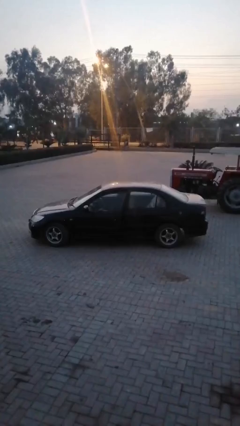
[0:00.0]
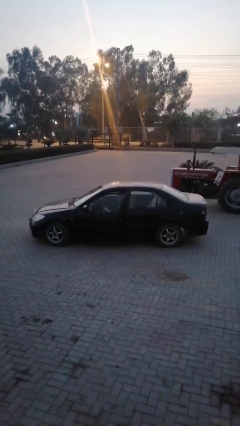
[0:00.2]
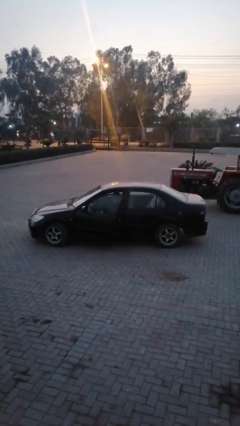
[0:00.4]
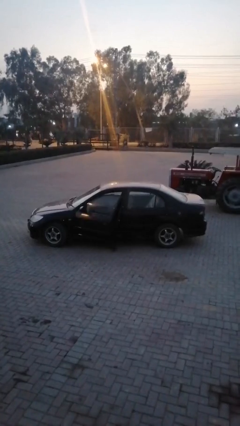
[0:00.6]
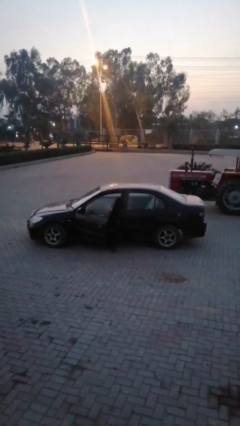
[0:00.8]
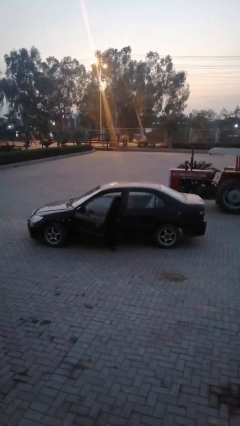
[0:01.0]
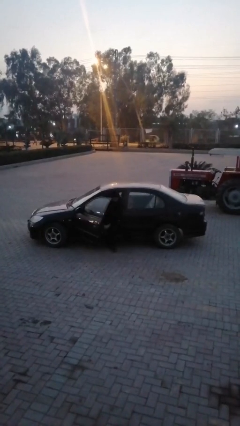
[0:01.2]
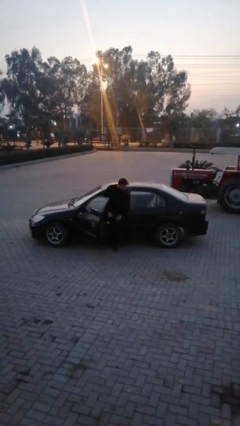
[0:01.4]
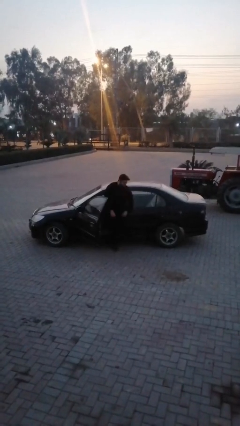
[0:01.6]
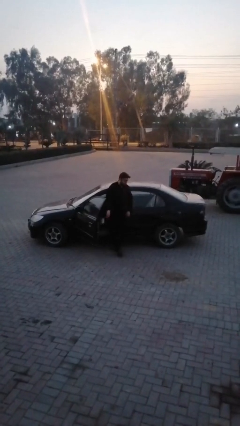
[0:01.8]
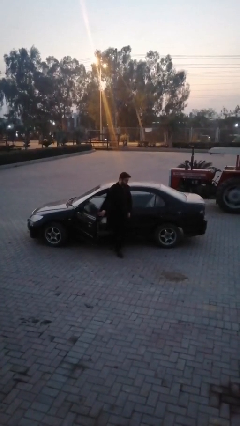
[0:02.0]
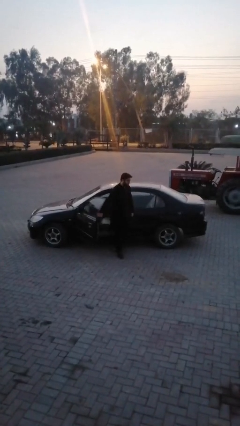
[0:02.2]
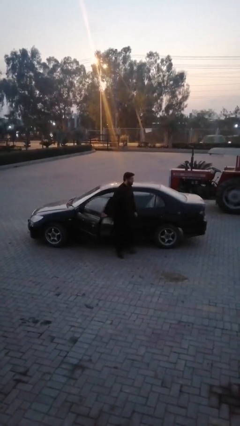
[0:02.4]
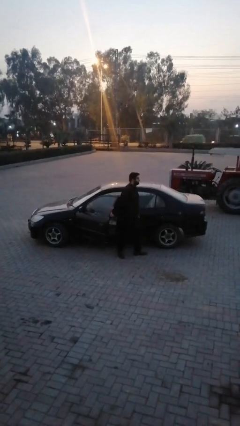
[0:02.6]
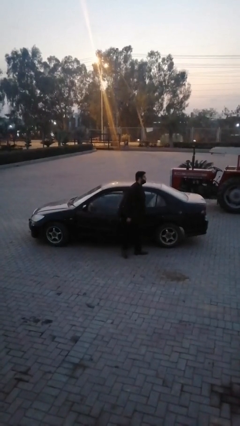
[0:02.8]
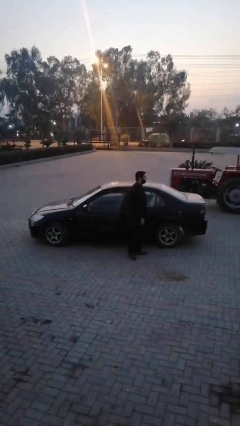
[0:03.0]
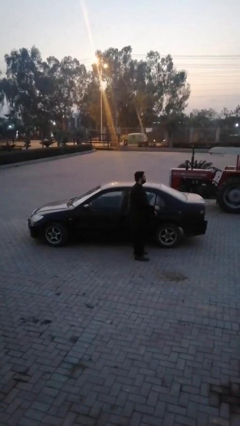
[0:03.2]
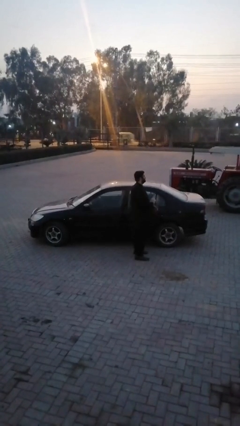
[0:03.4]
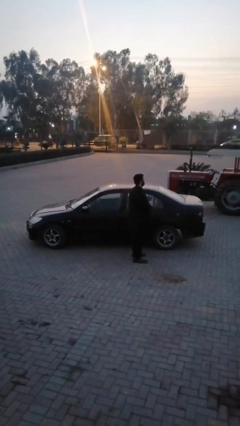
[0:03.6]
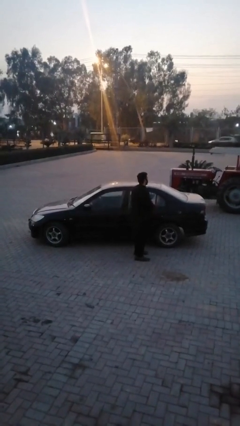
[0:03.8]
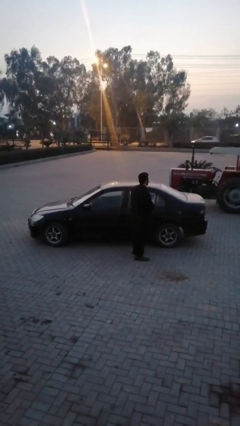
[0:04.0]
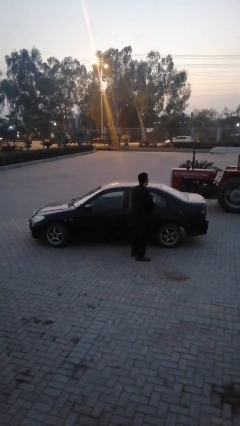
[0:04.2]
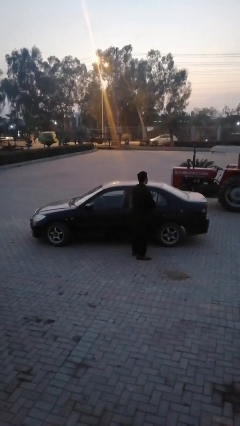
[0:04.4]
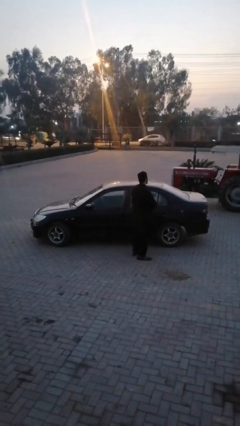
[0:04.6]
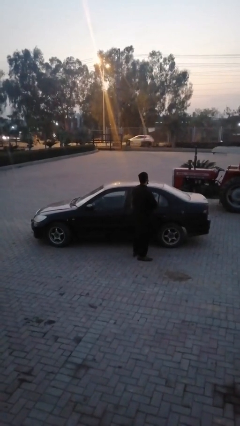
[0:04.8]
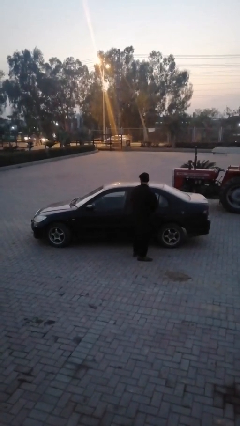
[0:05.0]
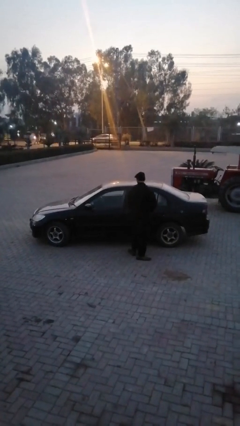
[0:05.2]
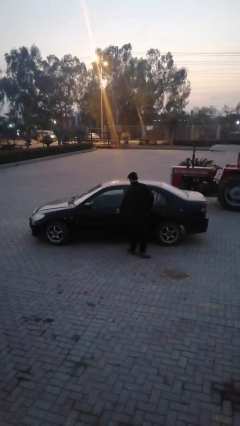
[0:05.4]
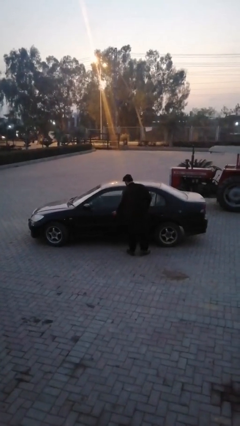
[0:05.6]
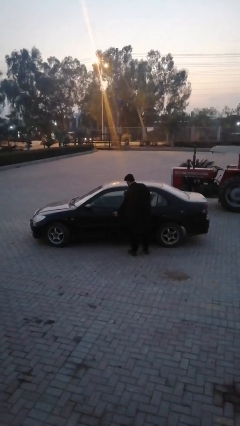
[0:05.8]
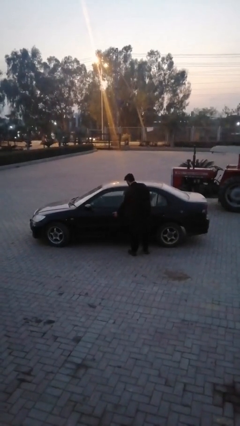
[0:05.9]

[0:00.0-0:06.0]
car drops off person

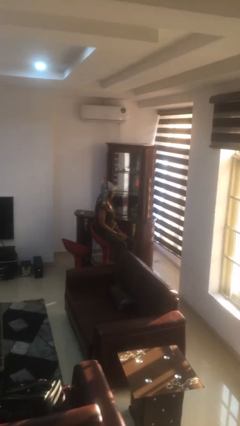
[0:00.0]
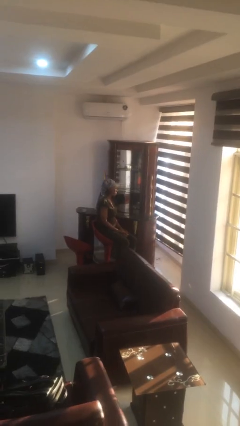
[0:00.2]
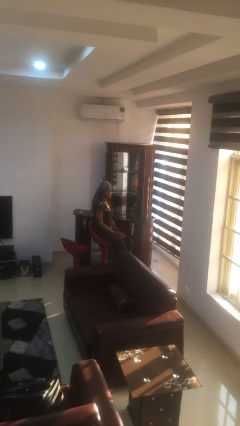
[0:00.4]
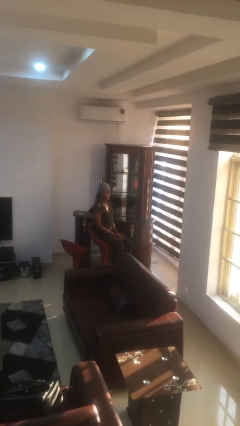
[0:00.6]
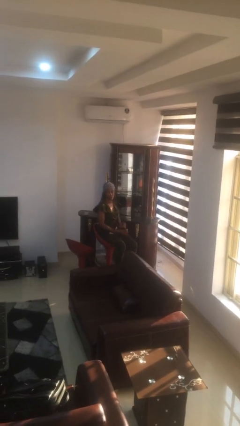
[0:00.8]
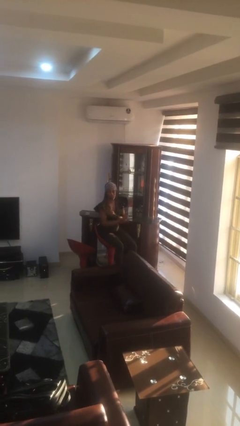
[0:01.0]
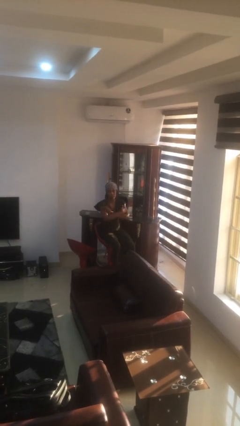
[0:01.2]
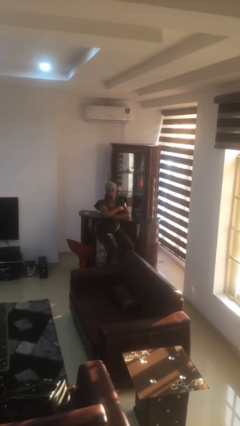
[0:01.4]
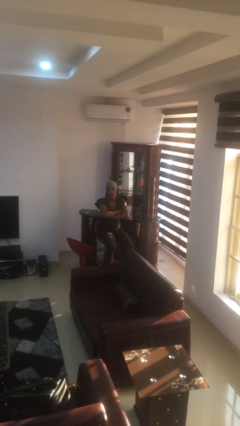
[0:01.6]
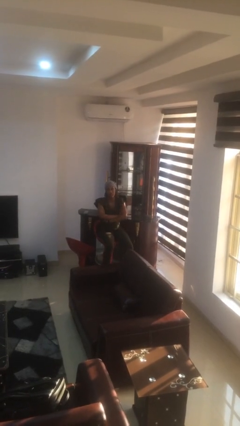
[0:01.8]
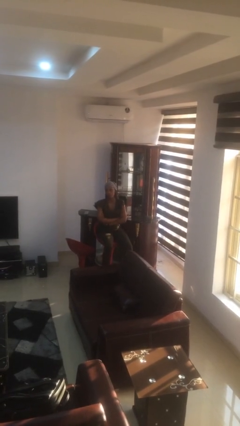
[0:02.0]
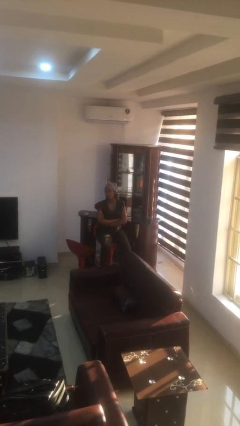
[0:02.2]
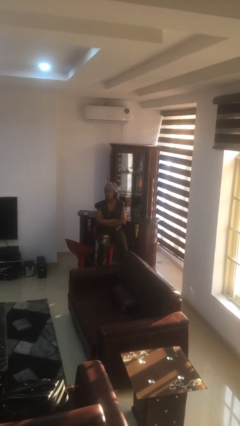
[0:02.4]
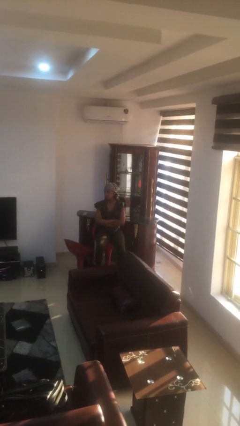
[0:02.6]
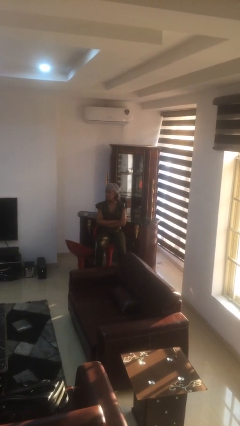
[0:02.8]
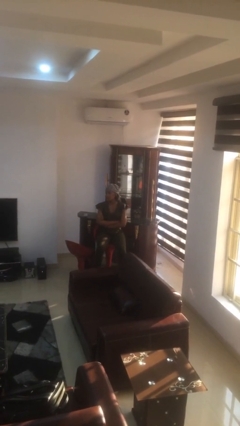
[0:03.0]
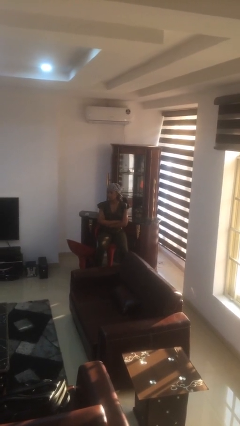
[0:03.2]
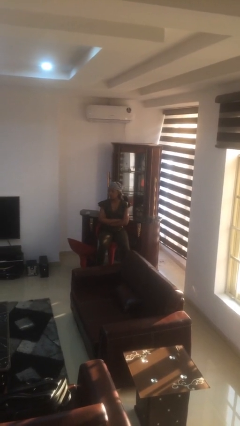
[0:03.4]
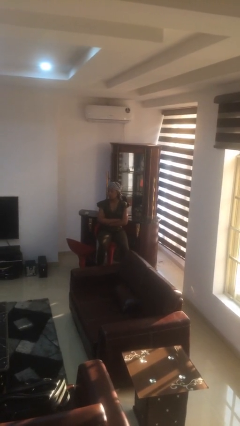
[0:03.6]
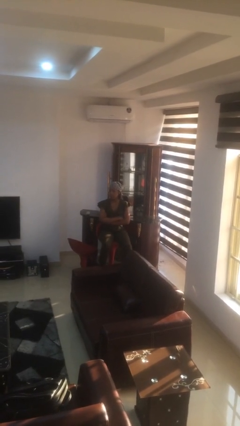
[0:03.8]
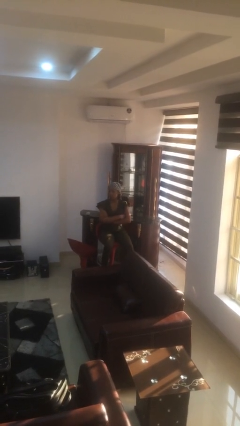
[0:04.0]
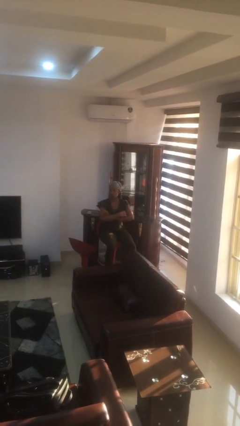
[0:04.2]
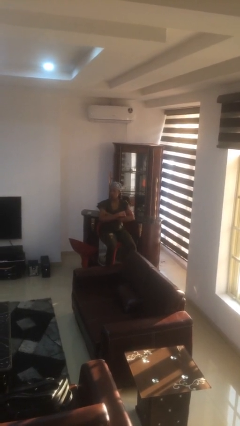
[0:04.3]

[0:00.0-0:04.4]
person crosses arms

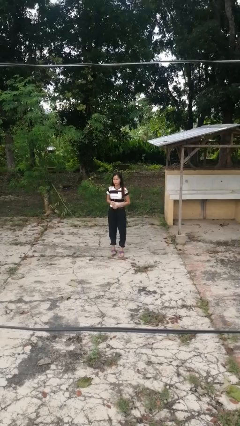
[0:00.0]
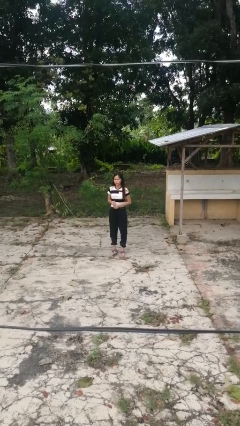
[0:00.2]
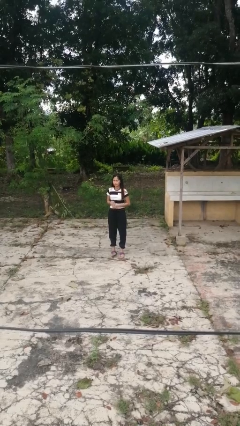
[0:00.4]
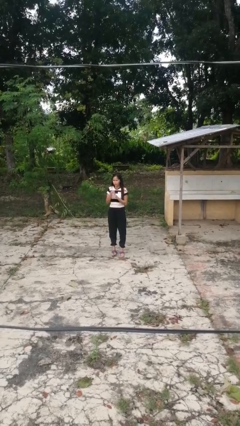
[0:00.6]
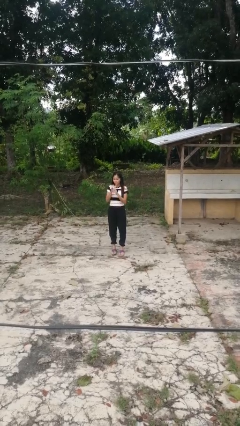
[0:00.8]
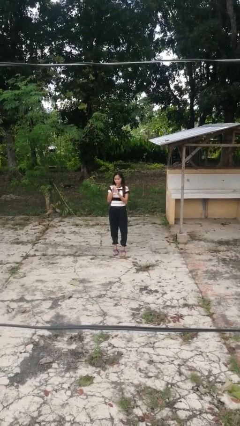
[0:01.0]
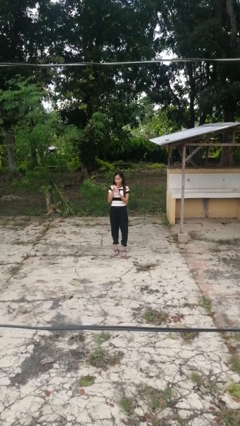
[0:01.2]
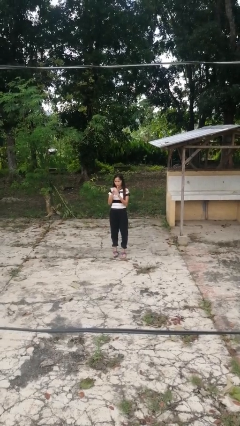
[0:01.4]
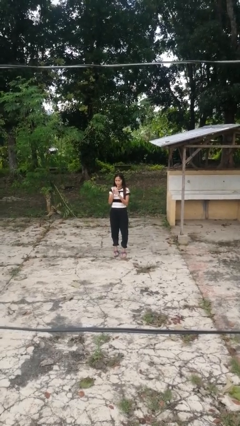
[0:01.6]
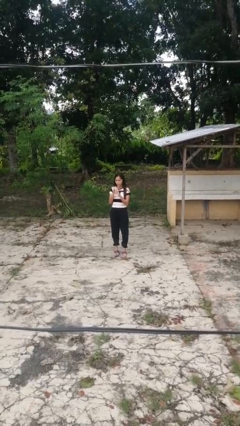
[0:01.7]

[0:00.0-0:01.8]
person drinks from straw

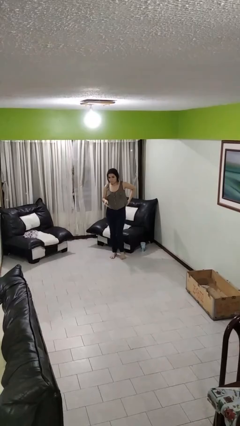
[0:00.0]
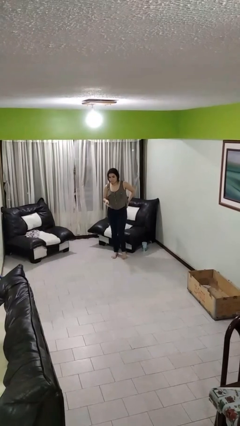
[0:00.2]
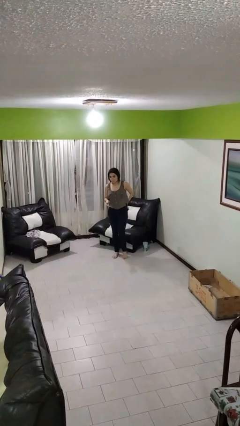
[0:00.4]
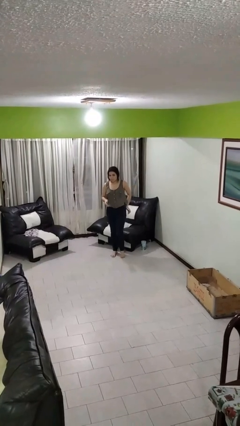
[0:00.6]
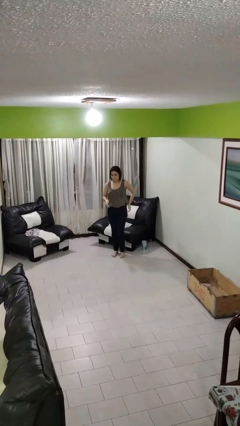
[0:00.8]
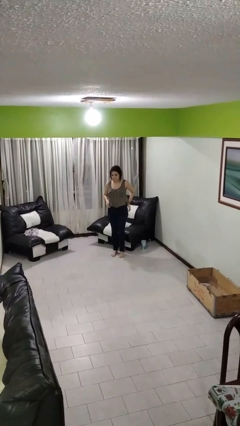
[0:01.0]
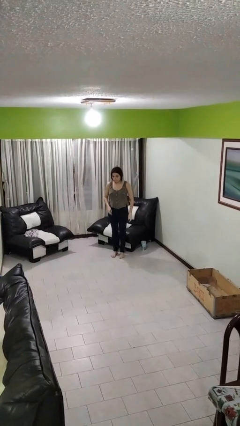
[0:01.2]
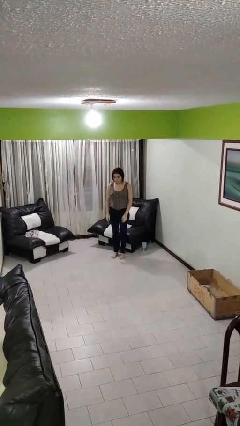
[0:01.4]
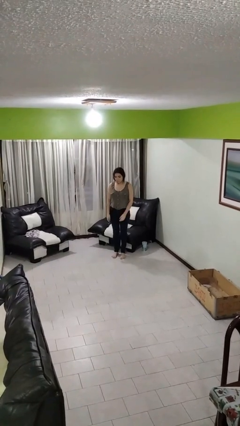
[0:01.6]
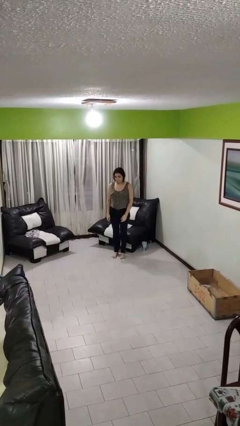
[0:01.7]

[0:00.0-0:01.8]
person puts phone into pocket

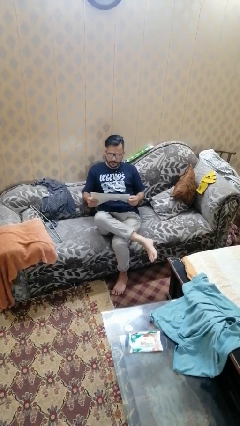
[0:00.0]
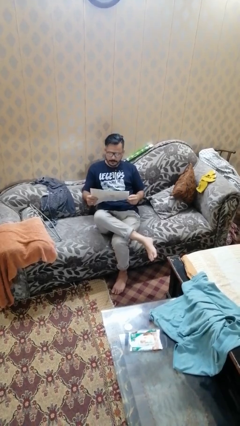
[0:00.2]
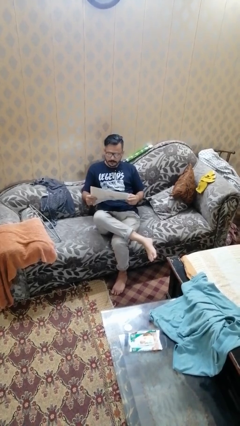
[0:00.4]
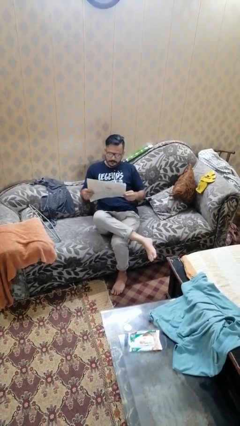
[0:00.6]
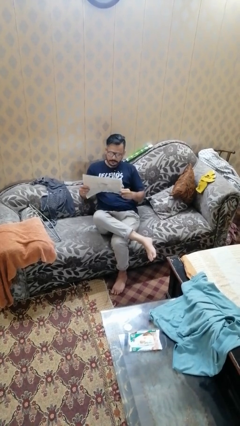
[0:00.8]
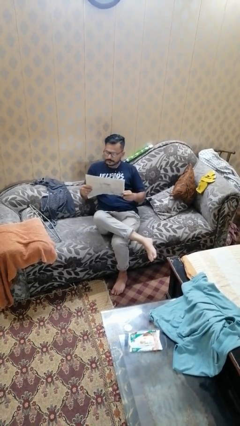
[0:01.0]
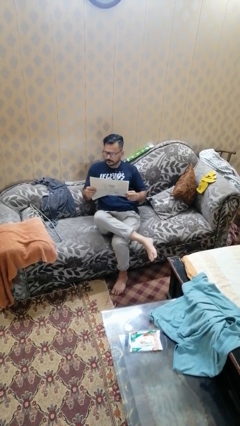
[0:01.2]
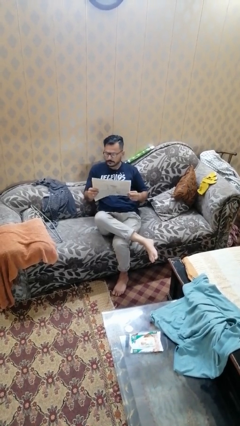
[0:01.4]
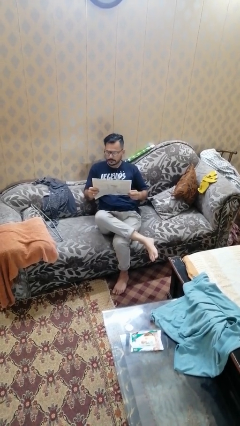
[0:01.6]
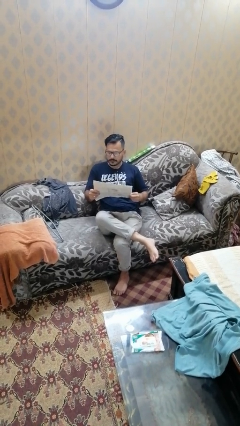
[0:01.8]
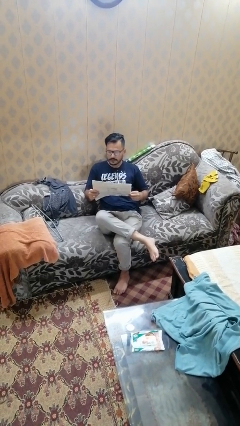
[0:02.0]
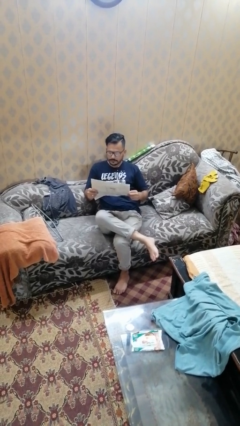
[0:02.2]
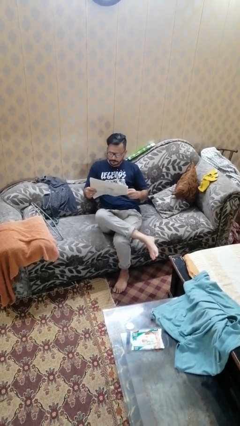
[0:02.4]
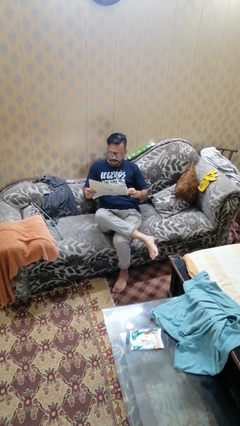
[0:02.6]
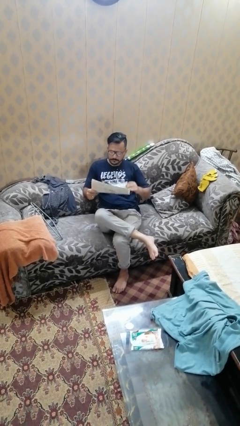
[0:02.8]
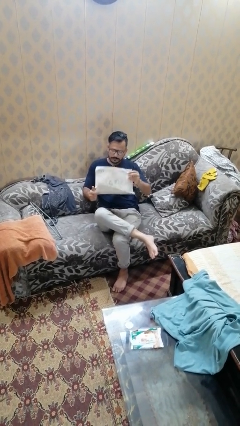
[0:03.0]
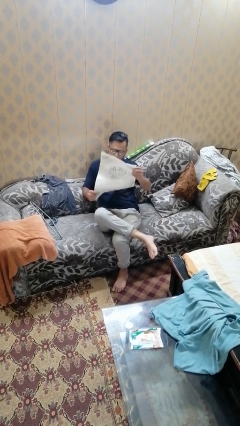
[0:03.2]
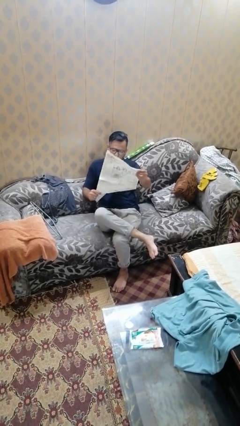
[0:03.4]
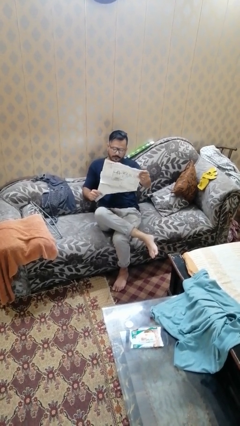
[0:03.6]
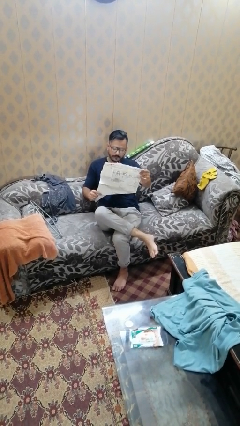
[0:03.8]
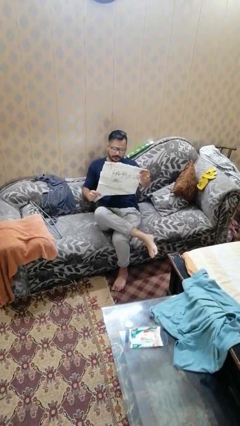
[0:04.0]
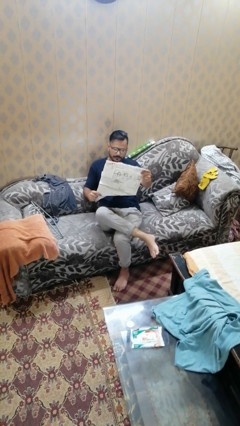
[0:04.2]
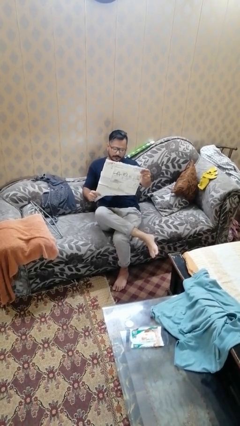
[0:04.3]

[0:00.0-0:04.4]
person reads newspaper
